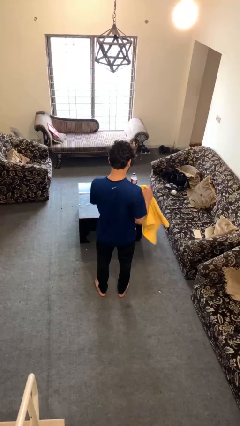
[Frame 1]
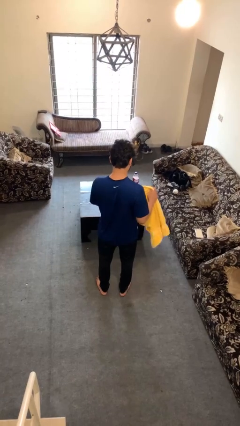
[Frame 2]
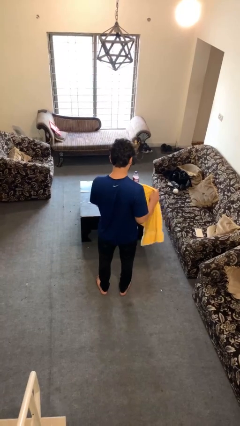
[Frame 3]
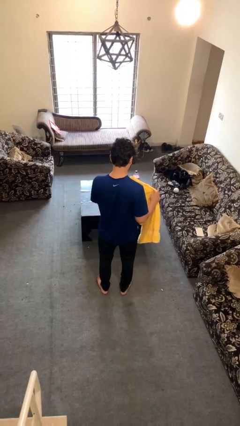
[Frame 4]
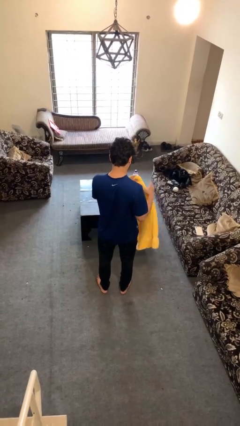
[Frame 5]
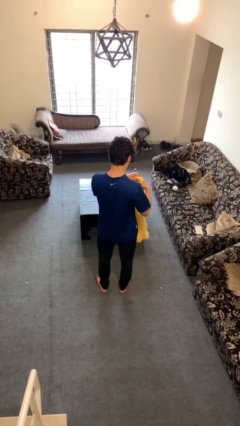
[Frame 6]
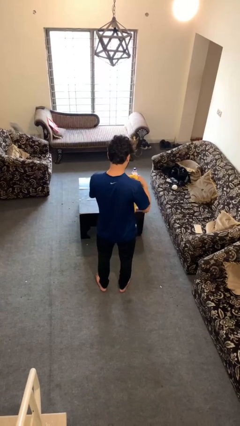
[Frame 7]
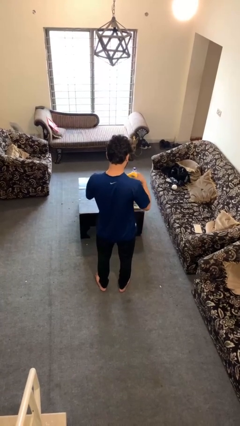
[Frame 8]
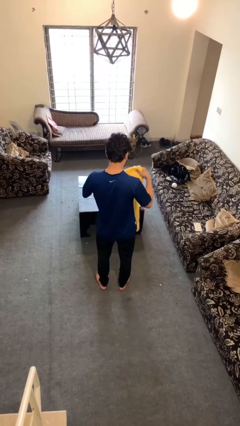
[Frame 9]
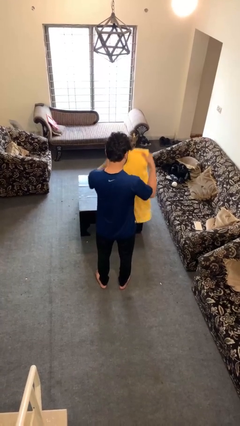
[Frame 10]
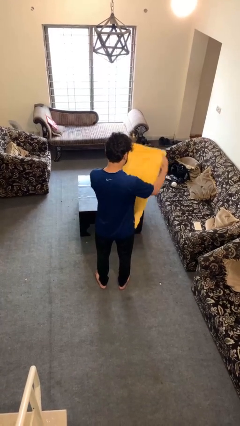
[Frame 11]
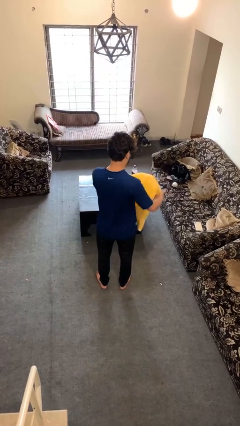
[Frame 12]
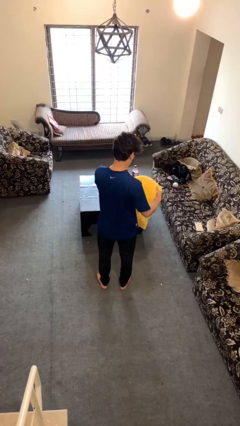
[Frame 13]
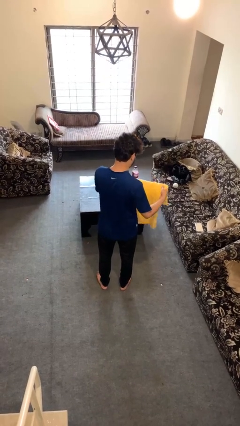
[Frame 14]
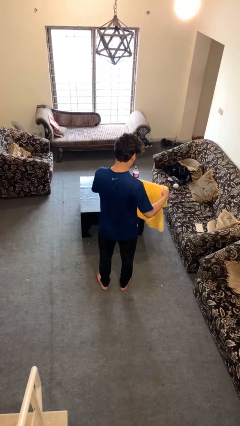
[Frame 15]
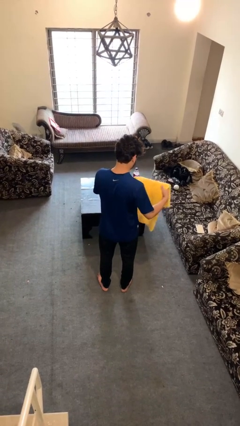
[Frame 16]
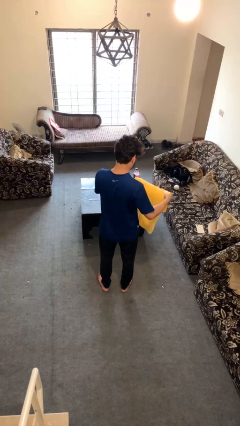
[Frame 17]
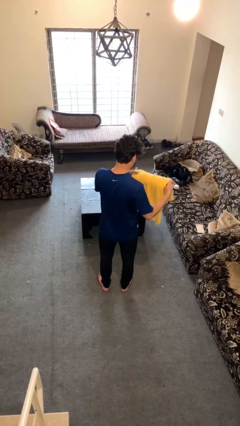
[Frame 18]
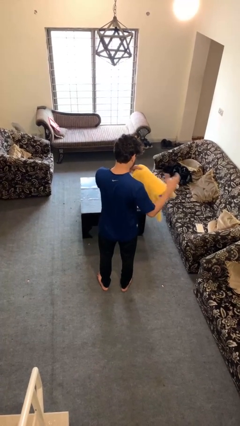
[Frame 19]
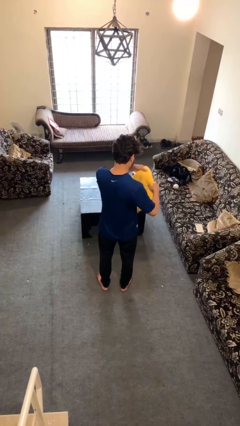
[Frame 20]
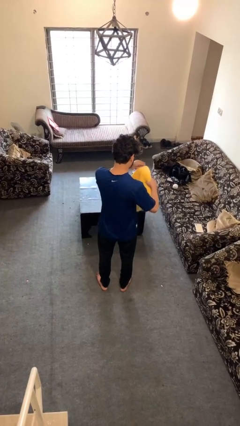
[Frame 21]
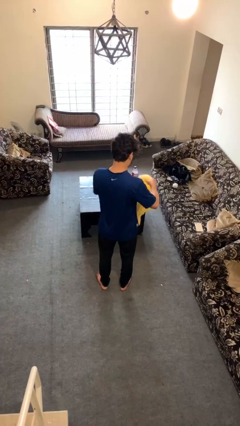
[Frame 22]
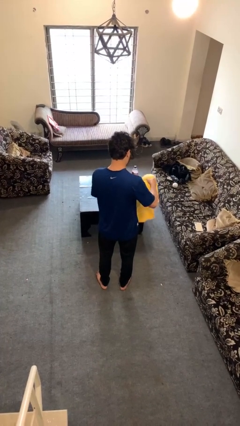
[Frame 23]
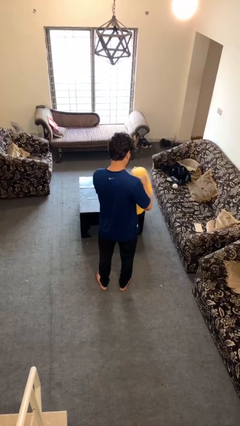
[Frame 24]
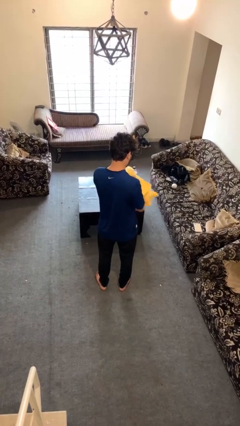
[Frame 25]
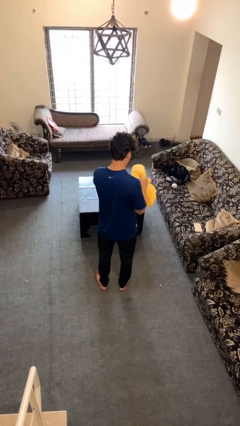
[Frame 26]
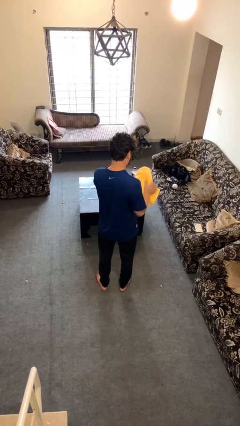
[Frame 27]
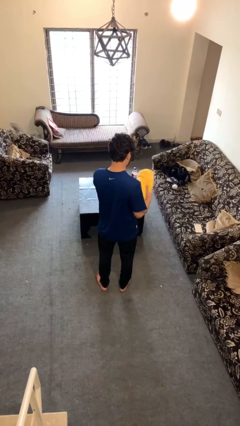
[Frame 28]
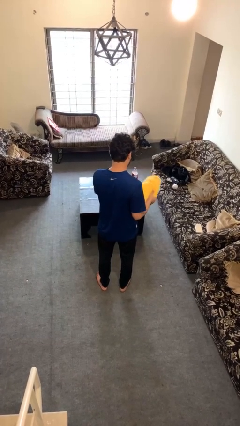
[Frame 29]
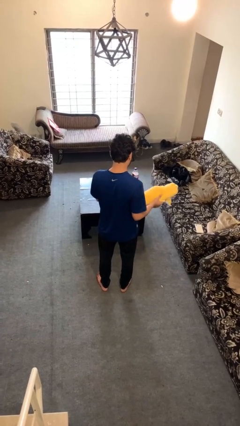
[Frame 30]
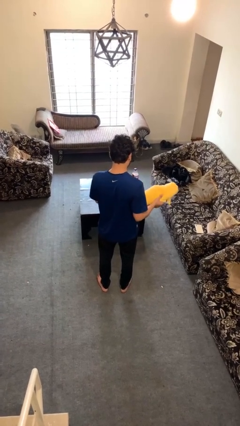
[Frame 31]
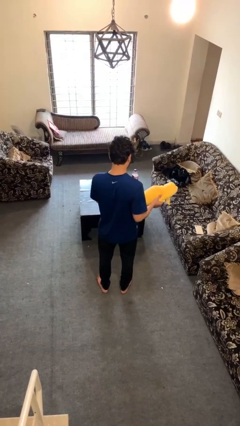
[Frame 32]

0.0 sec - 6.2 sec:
person folds towel

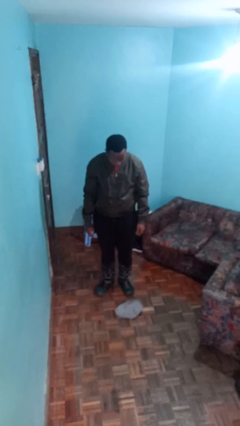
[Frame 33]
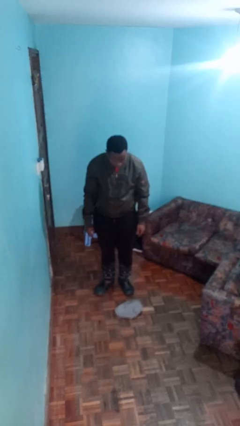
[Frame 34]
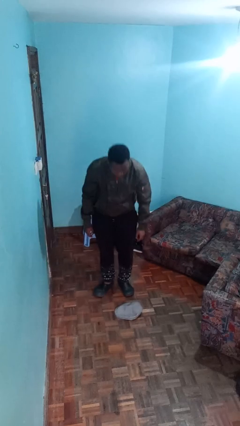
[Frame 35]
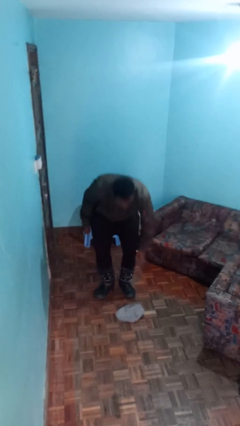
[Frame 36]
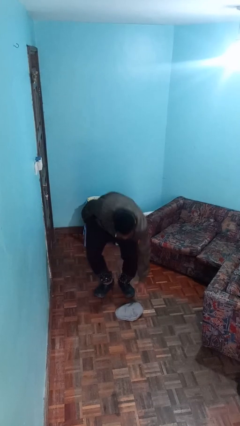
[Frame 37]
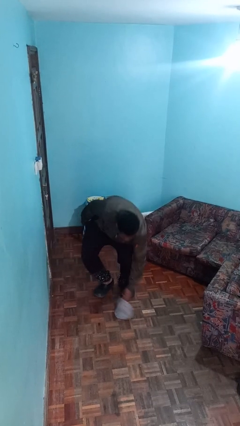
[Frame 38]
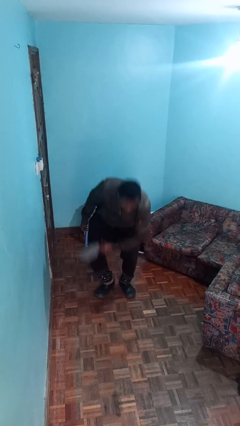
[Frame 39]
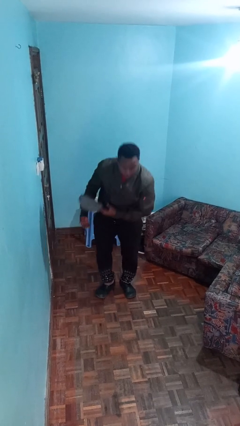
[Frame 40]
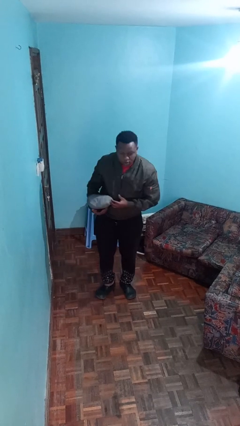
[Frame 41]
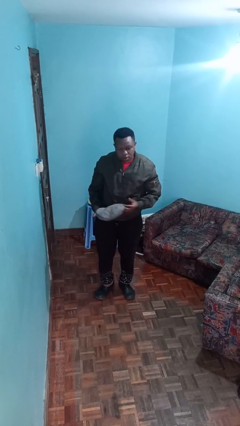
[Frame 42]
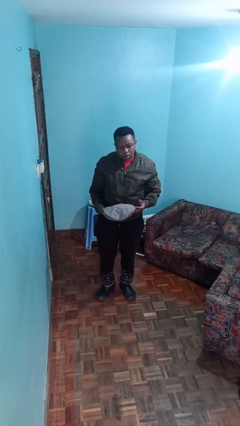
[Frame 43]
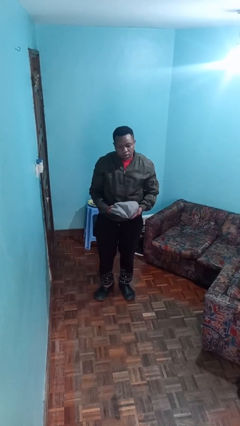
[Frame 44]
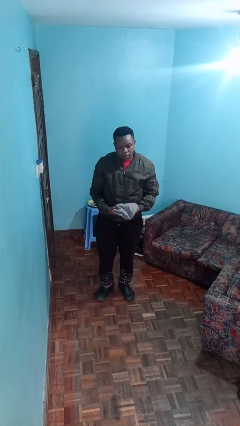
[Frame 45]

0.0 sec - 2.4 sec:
person picks up object from floor

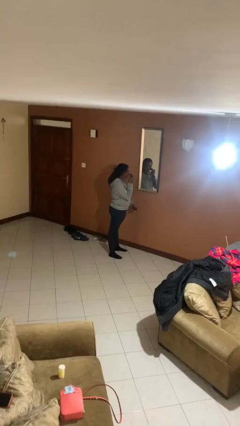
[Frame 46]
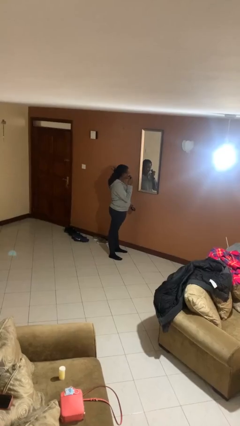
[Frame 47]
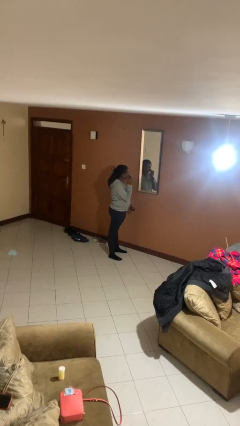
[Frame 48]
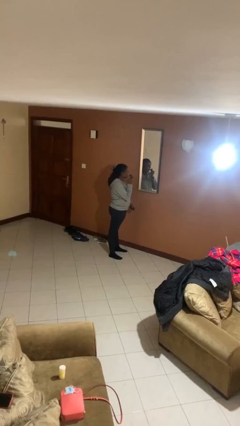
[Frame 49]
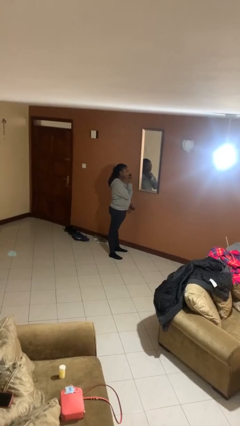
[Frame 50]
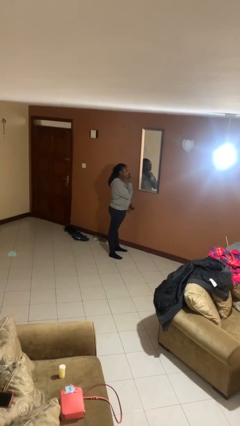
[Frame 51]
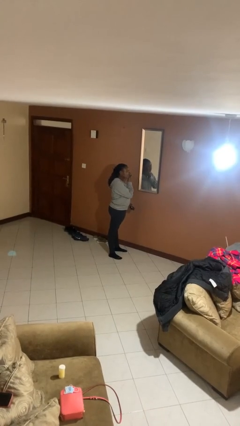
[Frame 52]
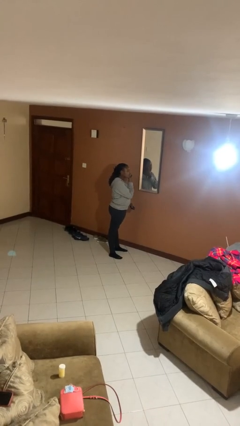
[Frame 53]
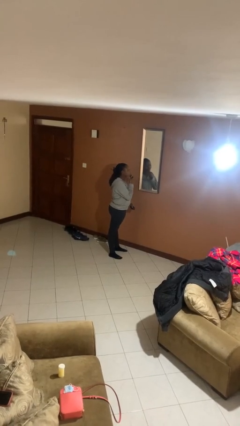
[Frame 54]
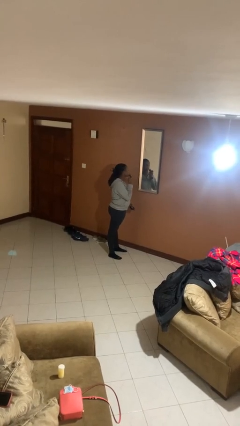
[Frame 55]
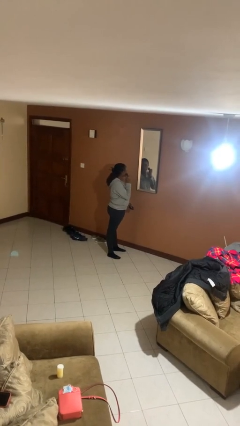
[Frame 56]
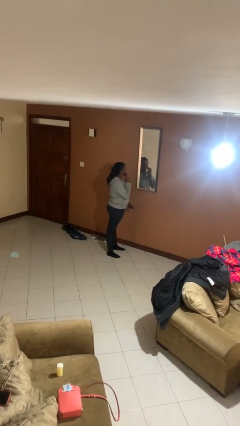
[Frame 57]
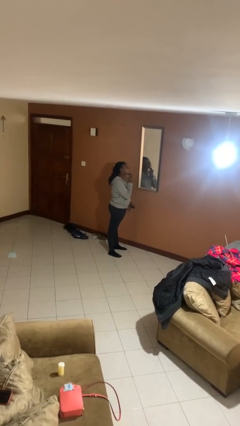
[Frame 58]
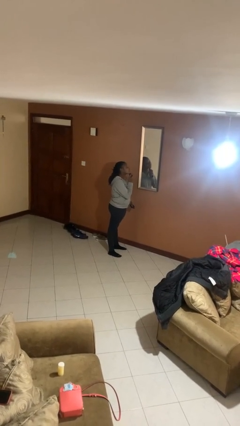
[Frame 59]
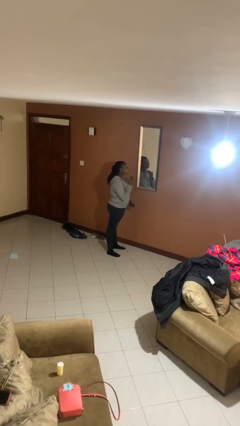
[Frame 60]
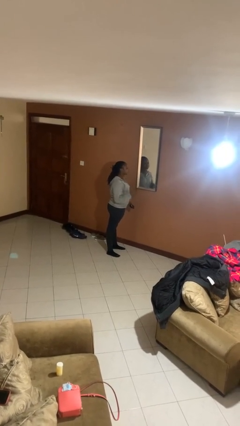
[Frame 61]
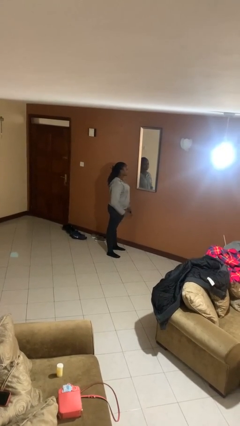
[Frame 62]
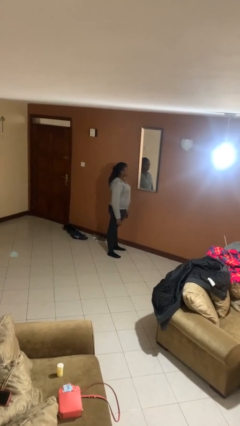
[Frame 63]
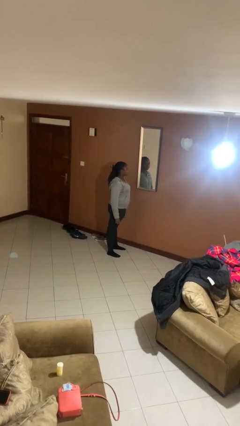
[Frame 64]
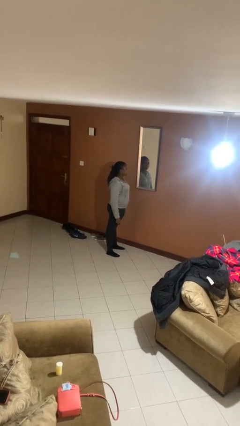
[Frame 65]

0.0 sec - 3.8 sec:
person applies foundation makeup

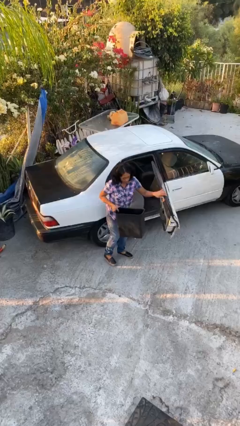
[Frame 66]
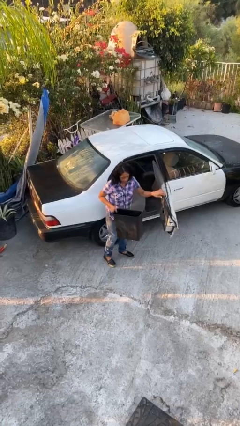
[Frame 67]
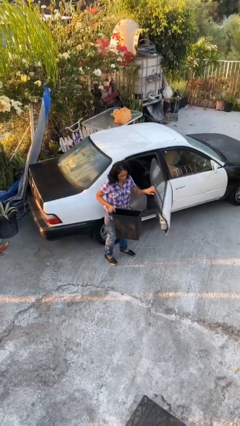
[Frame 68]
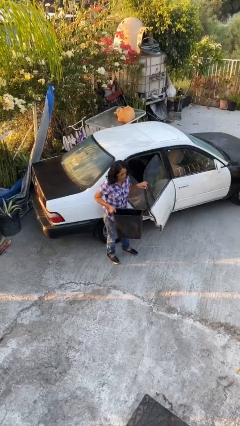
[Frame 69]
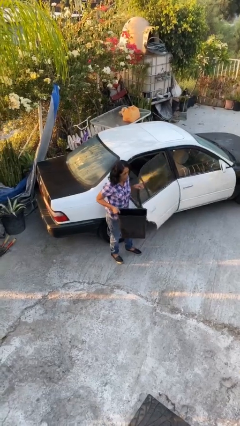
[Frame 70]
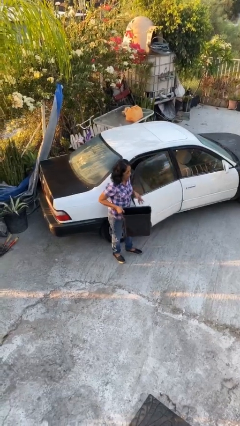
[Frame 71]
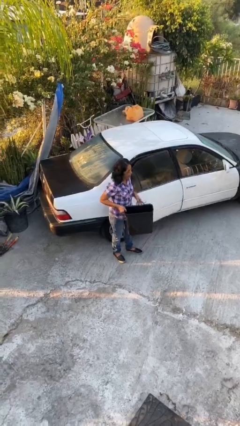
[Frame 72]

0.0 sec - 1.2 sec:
person closes car door

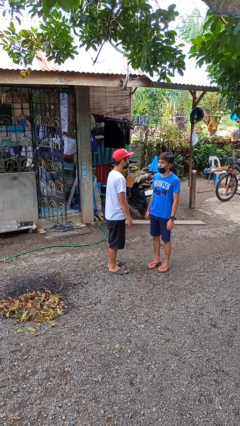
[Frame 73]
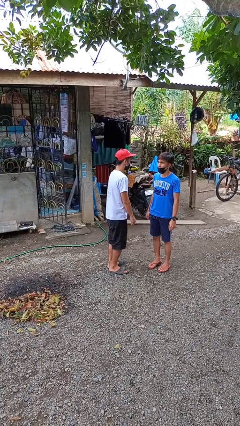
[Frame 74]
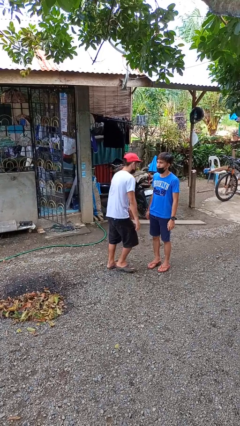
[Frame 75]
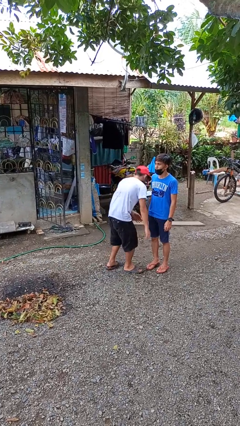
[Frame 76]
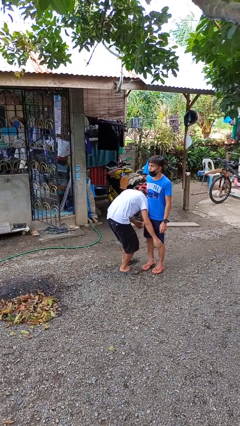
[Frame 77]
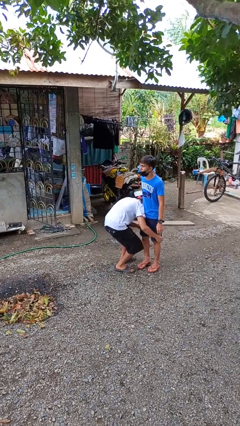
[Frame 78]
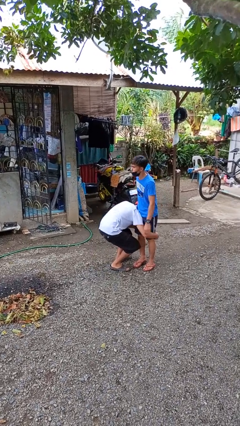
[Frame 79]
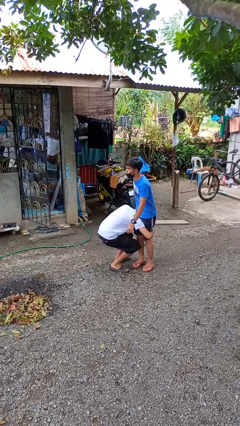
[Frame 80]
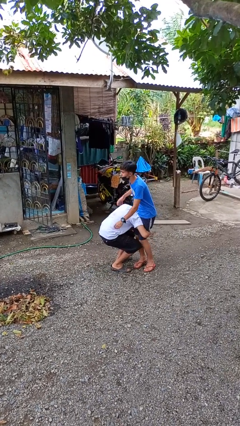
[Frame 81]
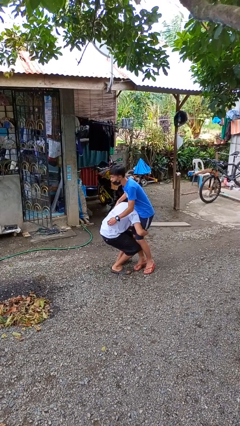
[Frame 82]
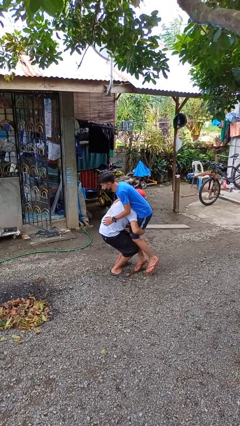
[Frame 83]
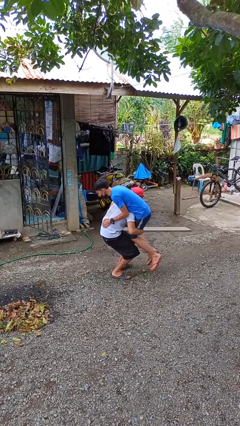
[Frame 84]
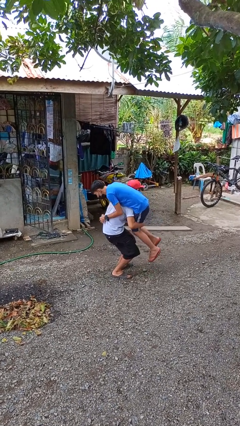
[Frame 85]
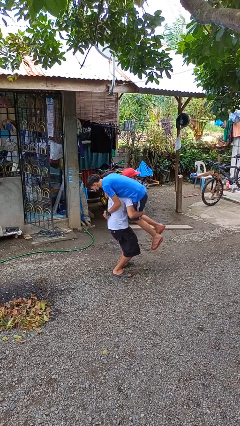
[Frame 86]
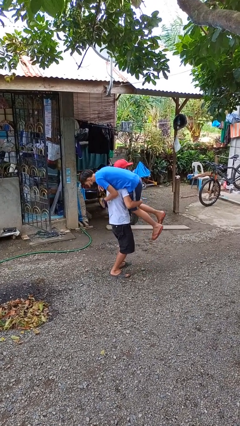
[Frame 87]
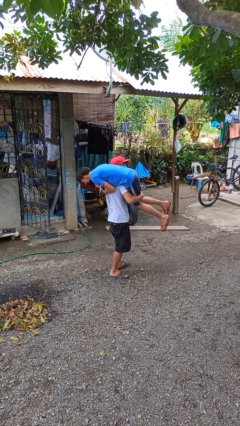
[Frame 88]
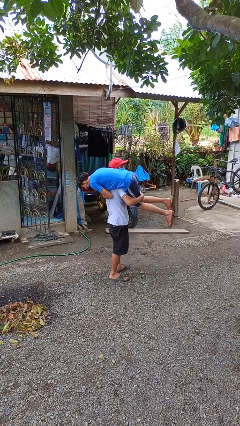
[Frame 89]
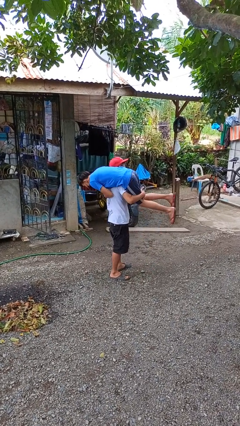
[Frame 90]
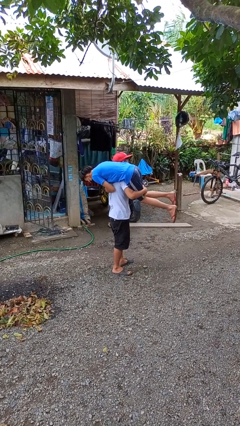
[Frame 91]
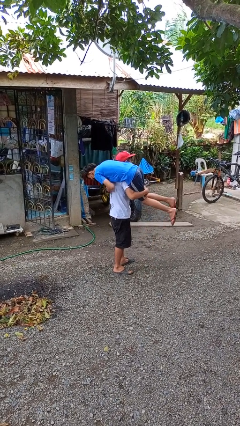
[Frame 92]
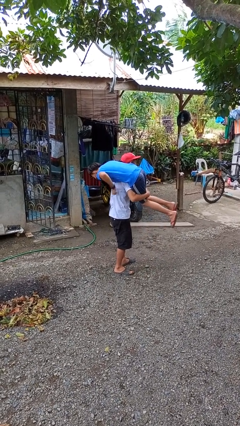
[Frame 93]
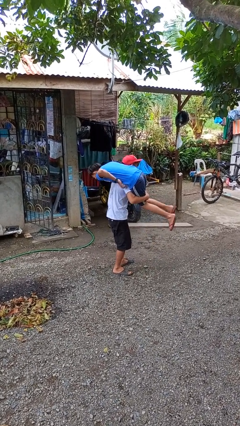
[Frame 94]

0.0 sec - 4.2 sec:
person carries person over shoulder
